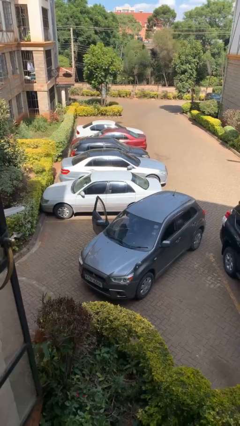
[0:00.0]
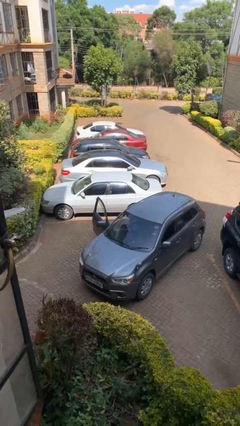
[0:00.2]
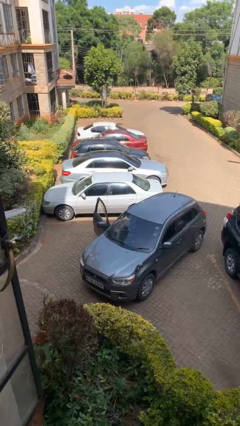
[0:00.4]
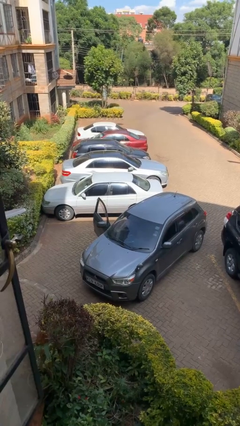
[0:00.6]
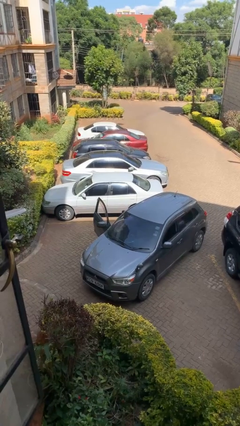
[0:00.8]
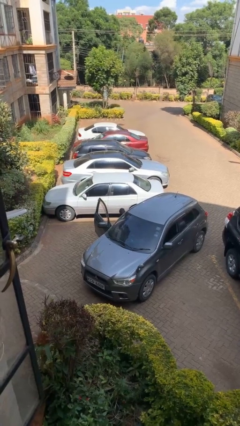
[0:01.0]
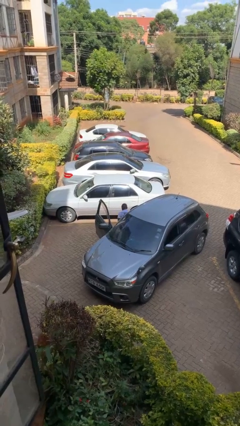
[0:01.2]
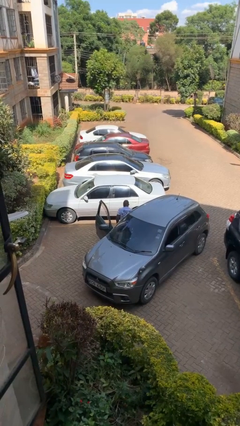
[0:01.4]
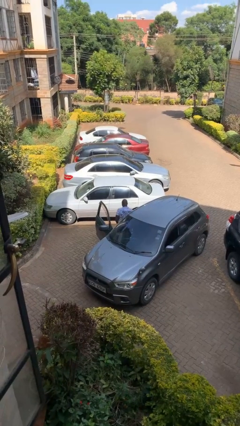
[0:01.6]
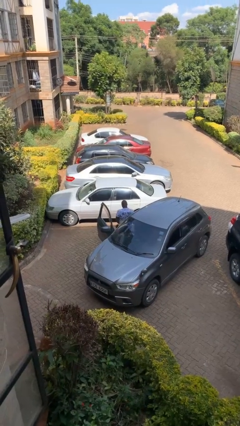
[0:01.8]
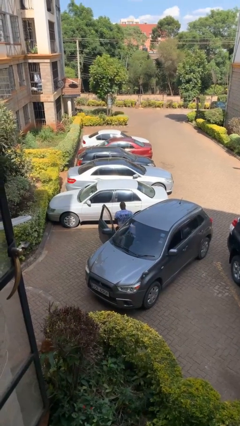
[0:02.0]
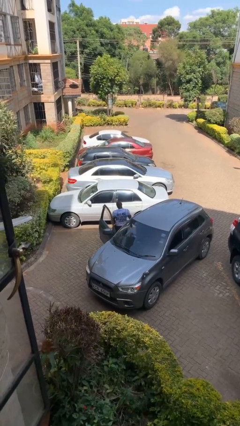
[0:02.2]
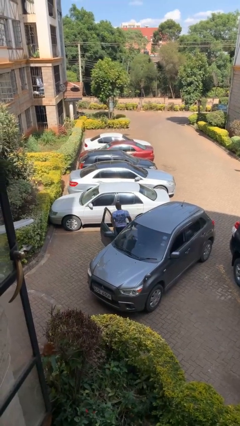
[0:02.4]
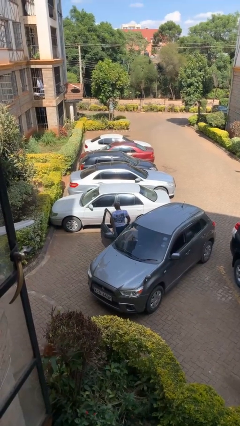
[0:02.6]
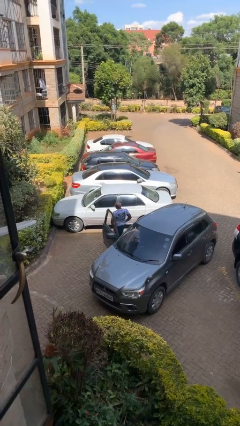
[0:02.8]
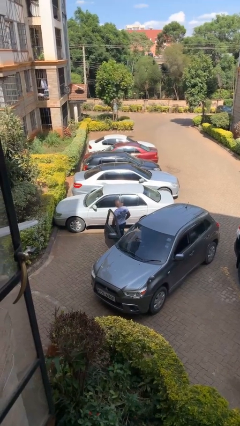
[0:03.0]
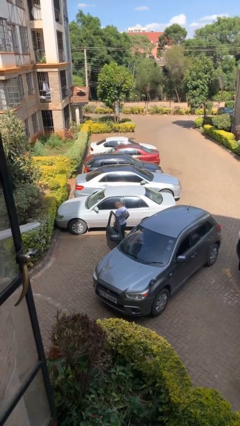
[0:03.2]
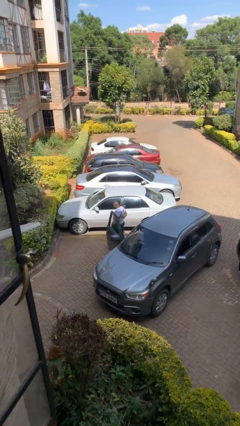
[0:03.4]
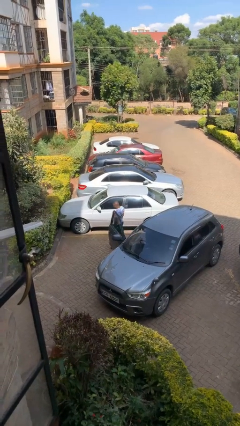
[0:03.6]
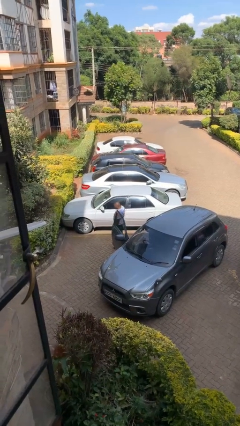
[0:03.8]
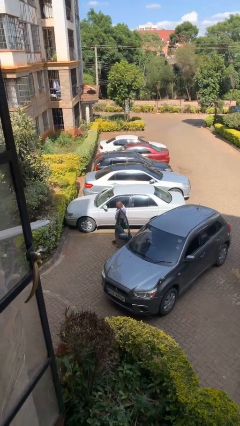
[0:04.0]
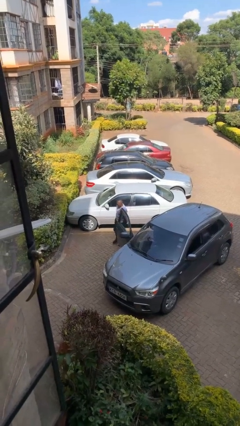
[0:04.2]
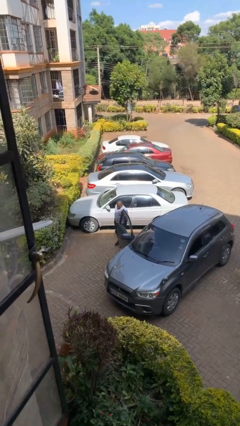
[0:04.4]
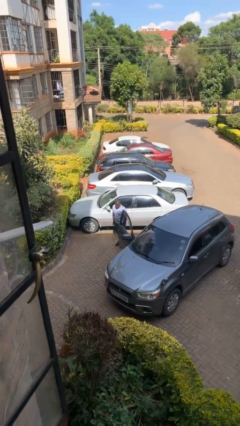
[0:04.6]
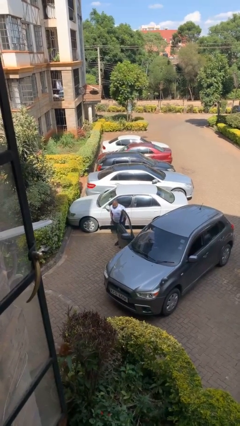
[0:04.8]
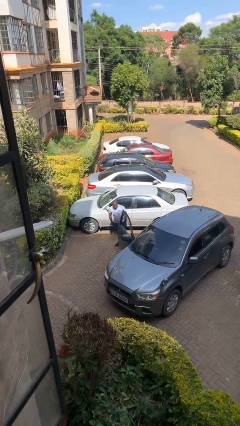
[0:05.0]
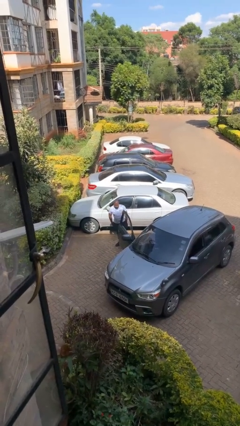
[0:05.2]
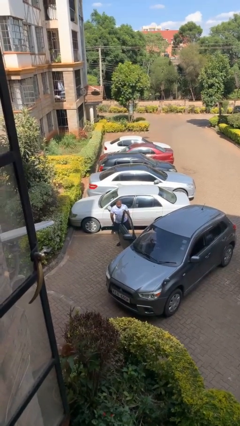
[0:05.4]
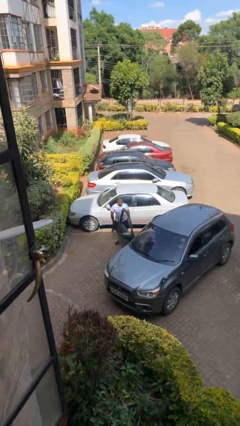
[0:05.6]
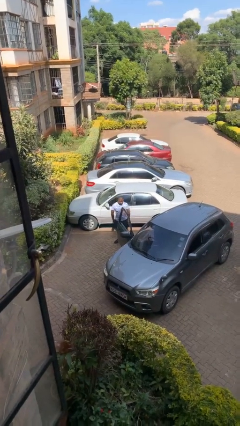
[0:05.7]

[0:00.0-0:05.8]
person exits car

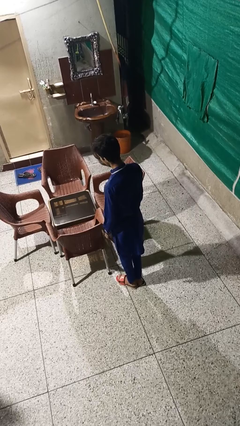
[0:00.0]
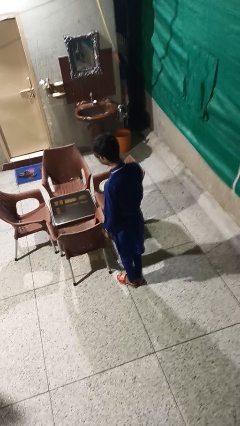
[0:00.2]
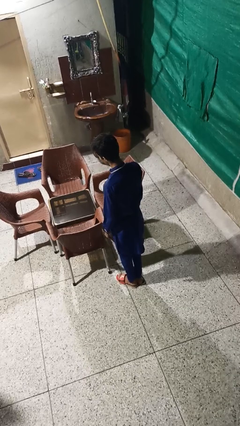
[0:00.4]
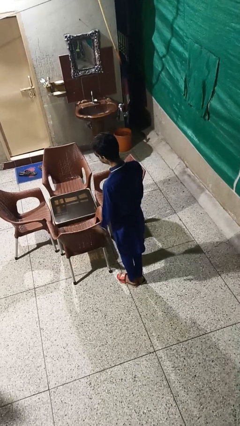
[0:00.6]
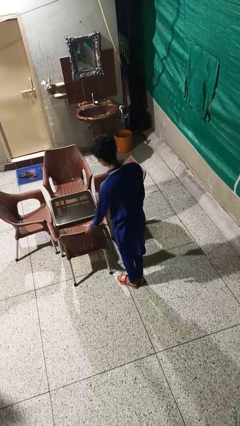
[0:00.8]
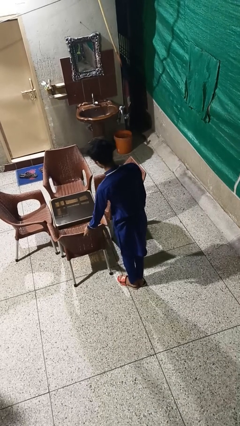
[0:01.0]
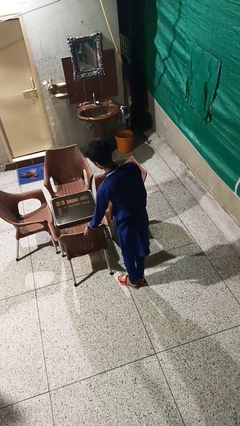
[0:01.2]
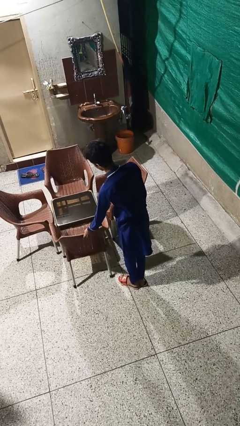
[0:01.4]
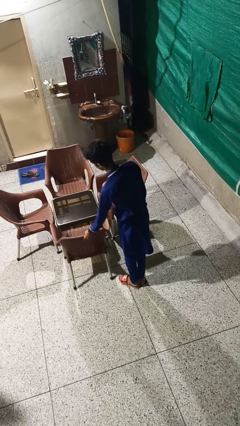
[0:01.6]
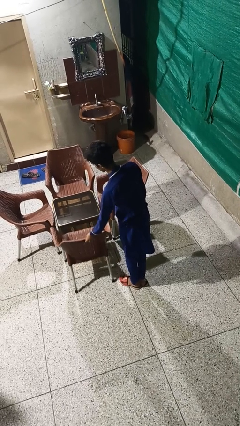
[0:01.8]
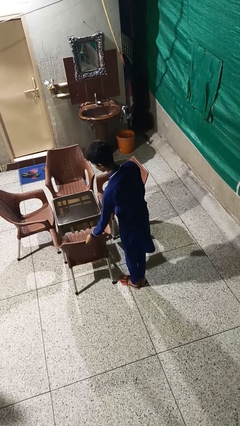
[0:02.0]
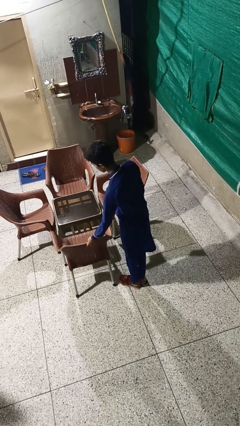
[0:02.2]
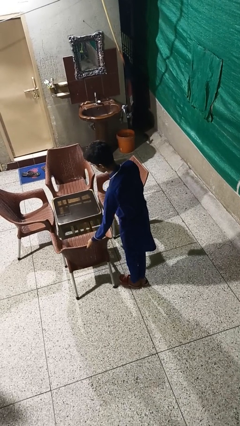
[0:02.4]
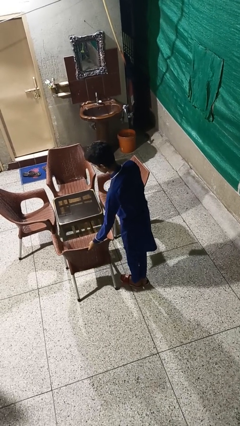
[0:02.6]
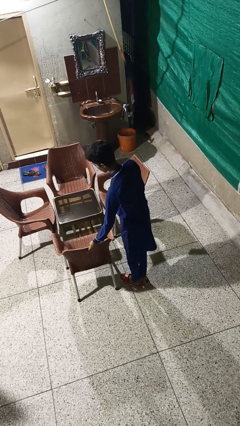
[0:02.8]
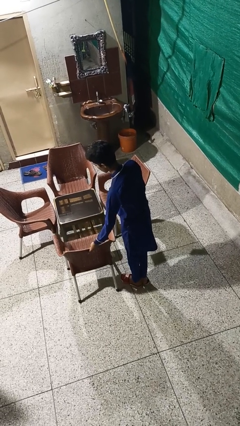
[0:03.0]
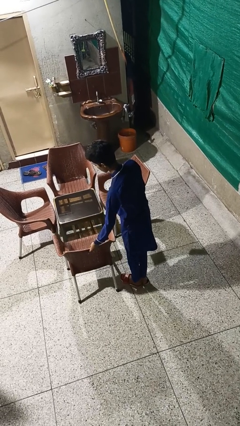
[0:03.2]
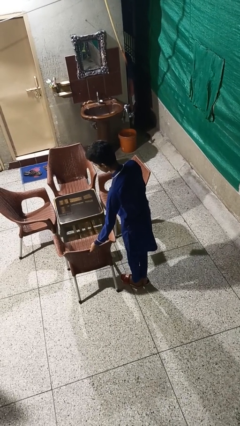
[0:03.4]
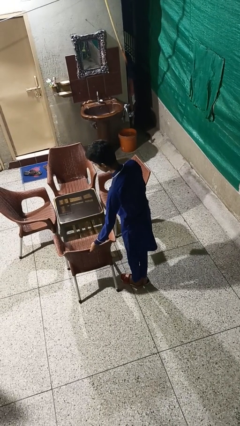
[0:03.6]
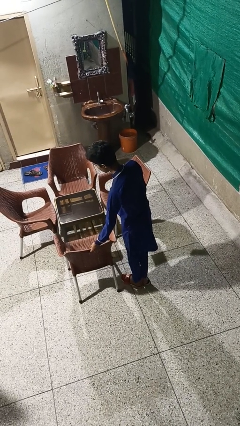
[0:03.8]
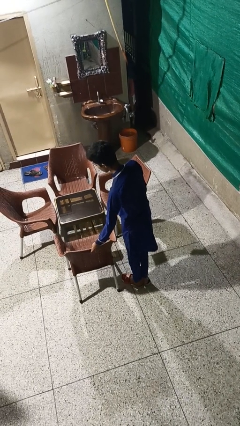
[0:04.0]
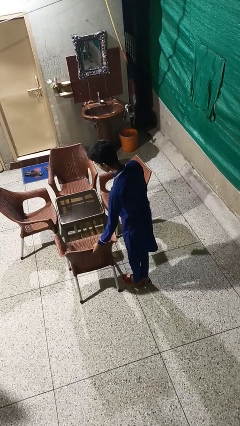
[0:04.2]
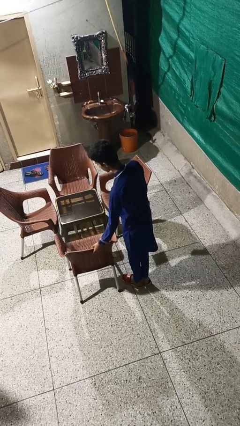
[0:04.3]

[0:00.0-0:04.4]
person pulls out chair

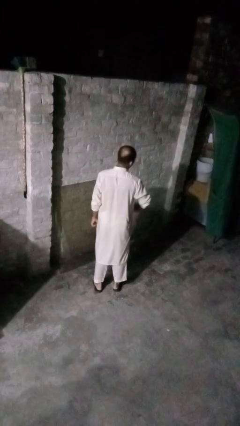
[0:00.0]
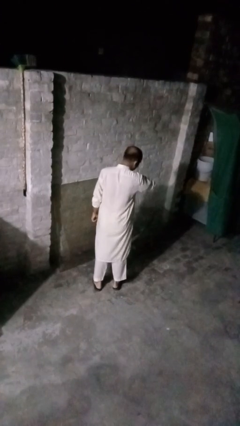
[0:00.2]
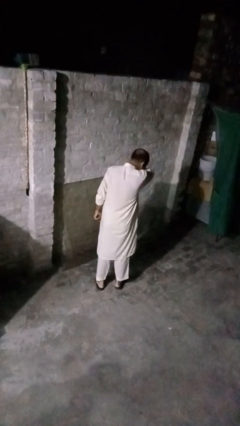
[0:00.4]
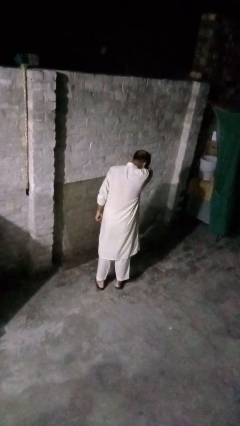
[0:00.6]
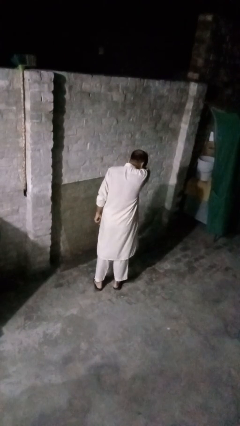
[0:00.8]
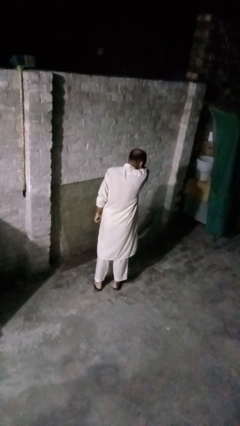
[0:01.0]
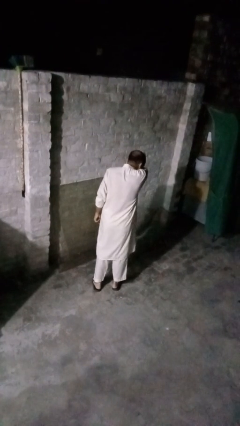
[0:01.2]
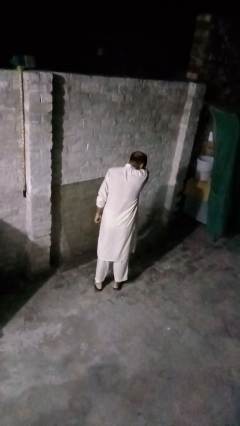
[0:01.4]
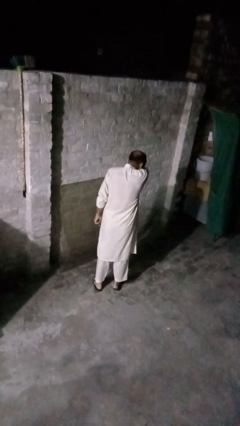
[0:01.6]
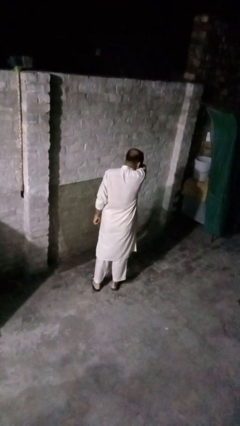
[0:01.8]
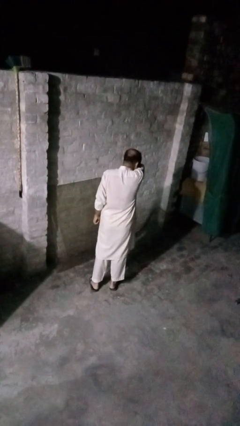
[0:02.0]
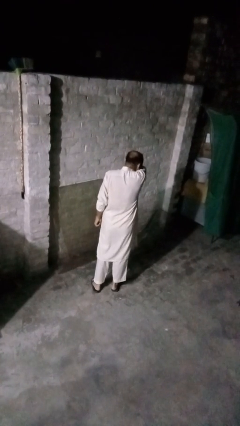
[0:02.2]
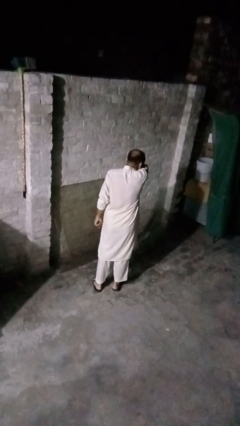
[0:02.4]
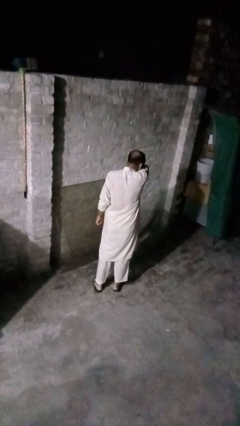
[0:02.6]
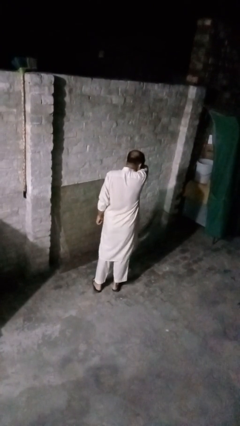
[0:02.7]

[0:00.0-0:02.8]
person sneezes into arm

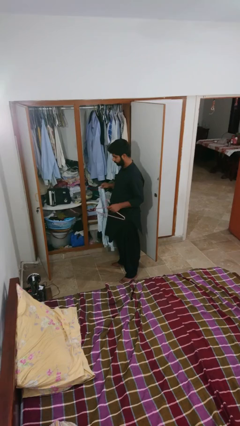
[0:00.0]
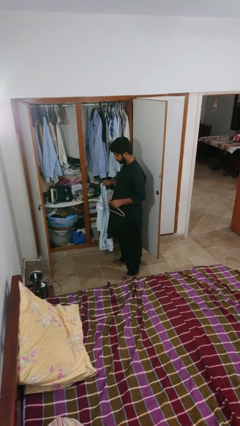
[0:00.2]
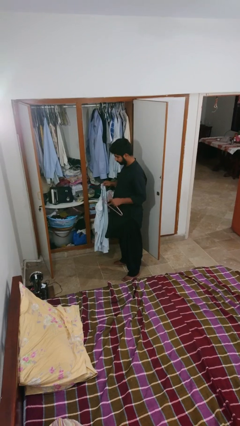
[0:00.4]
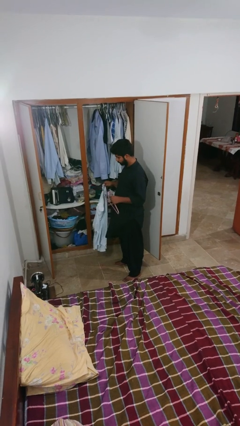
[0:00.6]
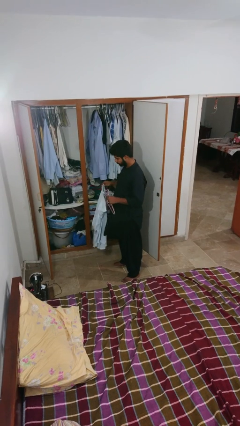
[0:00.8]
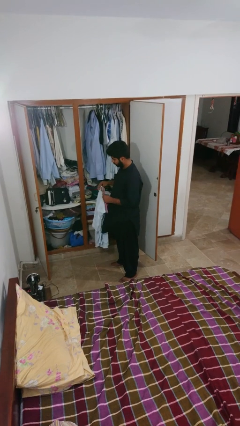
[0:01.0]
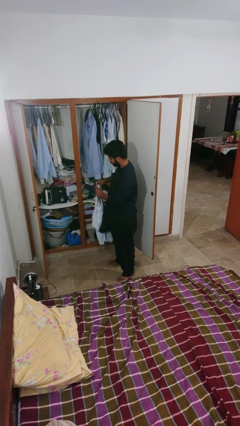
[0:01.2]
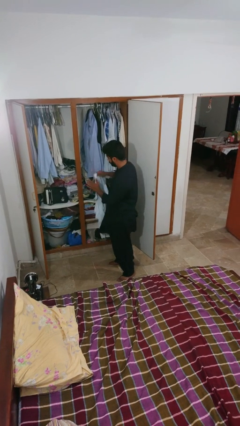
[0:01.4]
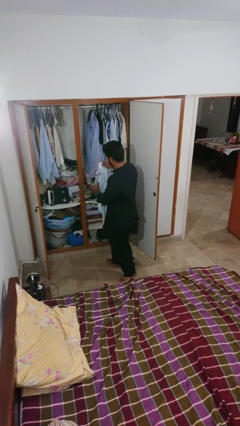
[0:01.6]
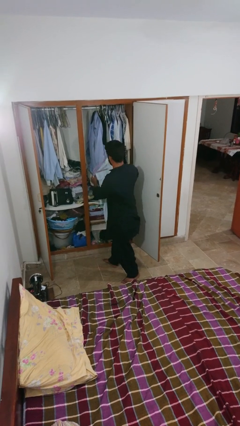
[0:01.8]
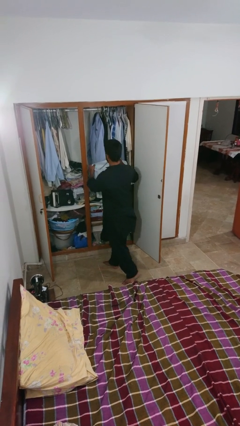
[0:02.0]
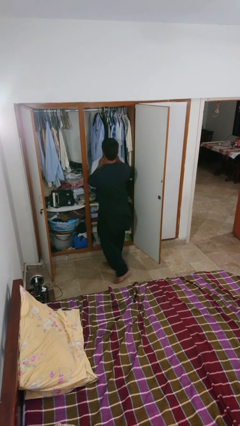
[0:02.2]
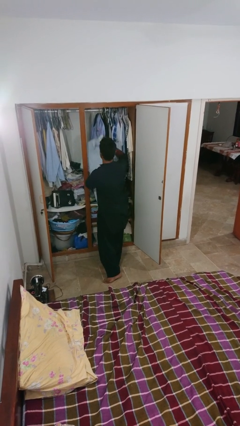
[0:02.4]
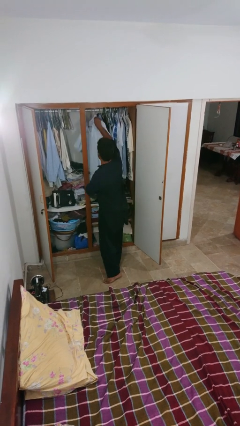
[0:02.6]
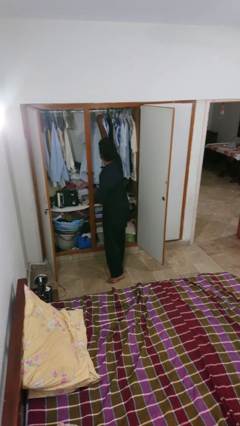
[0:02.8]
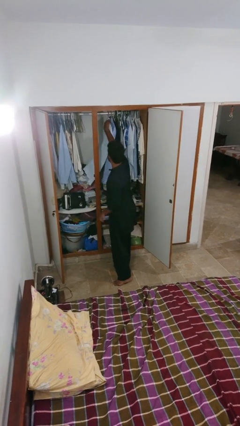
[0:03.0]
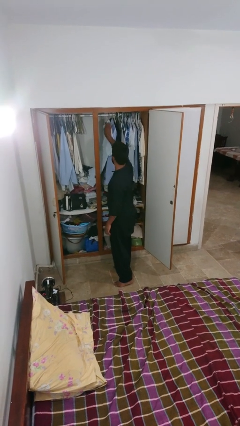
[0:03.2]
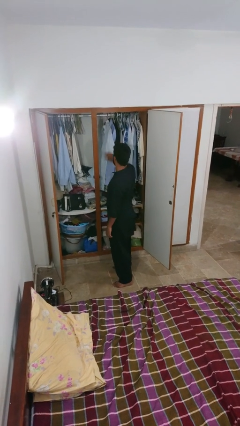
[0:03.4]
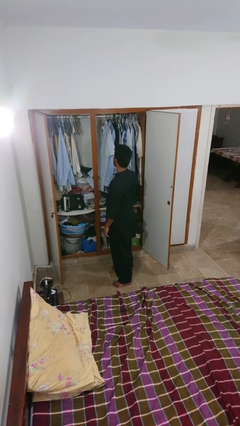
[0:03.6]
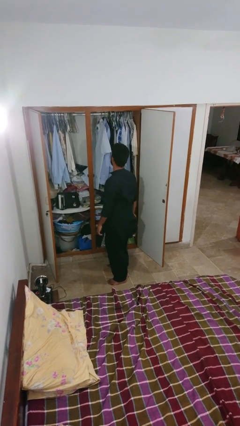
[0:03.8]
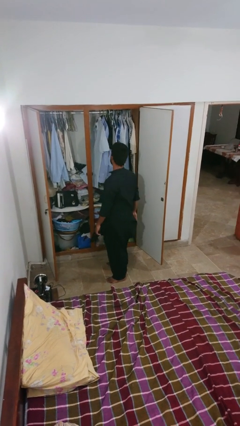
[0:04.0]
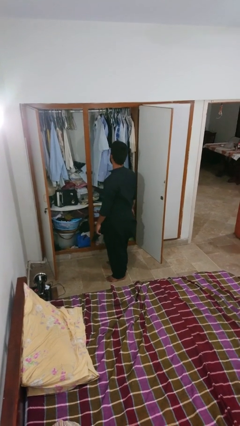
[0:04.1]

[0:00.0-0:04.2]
person puts clothes into closet

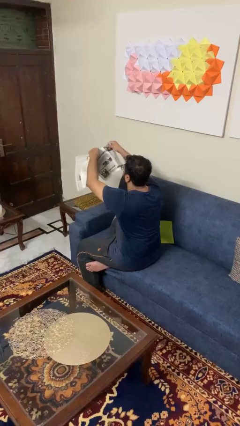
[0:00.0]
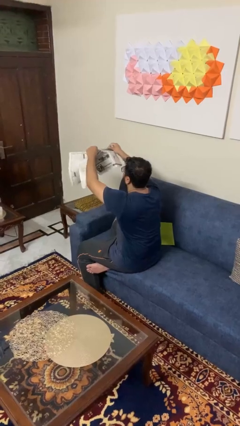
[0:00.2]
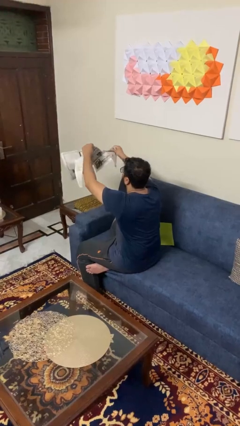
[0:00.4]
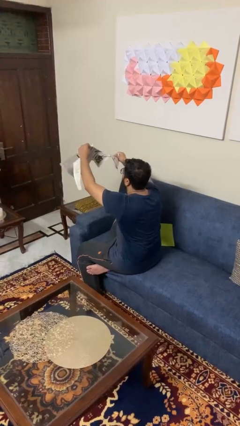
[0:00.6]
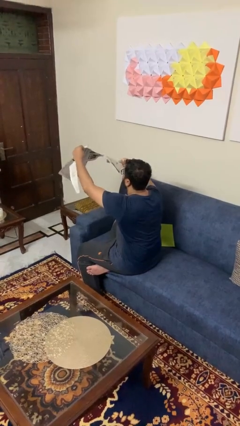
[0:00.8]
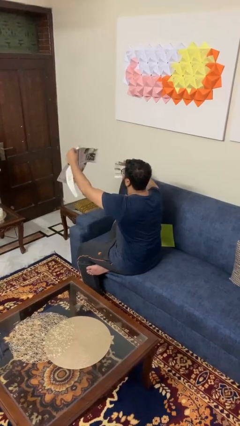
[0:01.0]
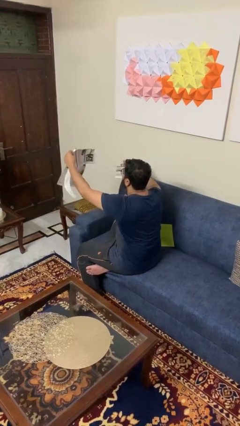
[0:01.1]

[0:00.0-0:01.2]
person tears paper
